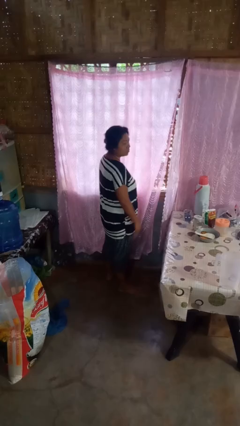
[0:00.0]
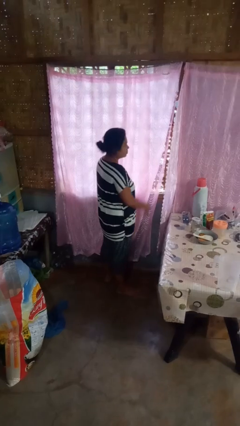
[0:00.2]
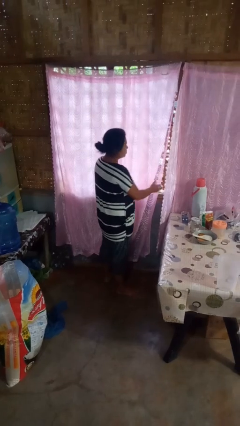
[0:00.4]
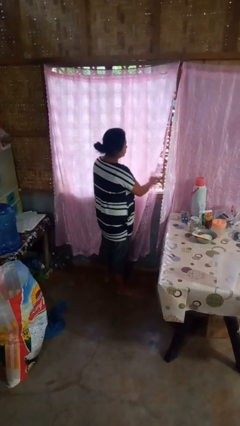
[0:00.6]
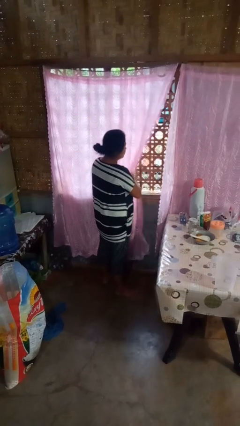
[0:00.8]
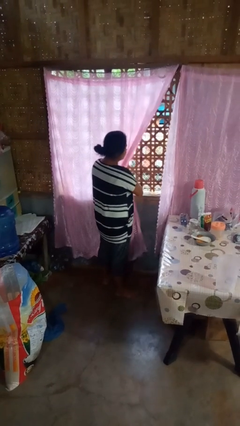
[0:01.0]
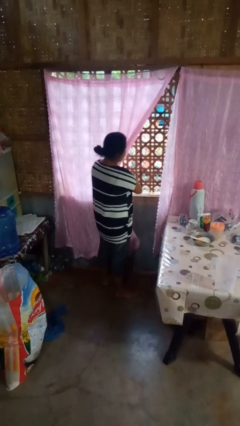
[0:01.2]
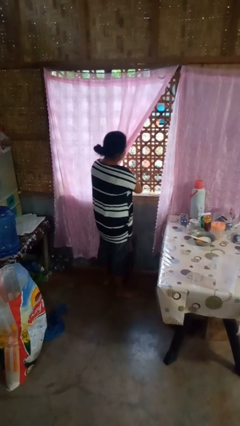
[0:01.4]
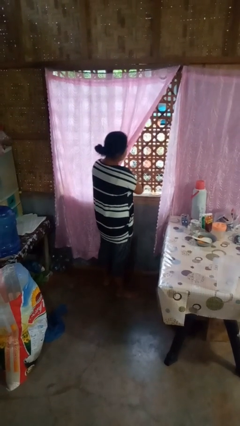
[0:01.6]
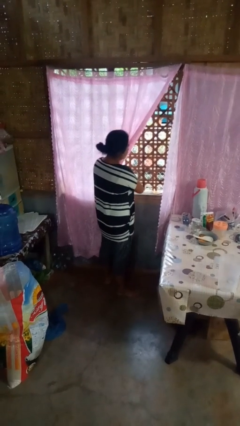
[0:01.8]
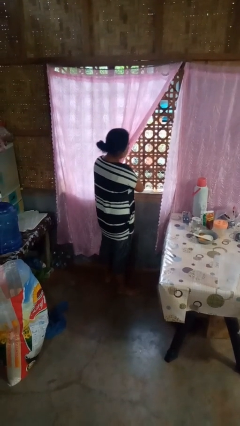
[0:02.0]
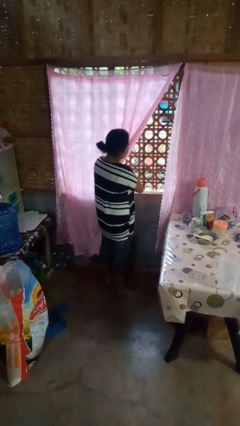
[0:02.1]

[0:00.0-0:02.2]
person opens curtains

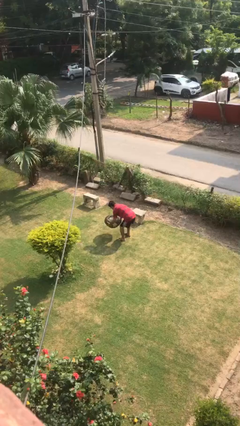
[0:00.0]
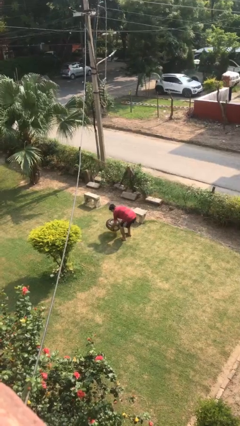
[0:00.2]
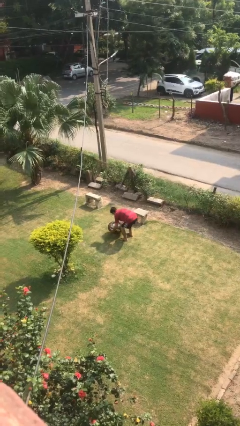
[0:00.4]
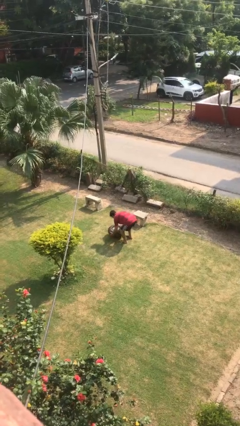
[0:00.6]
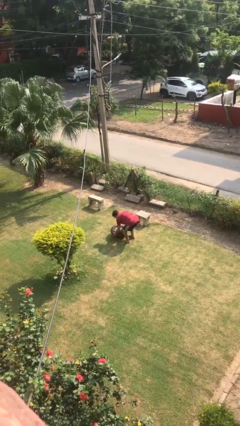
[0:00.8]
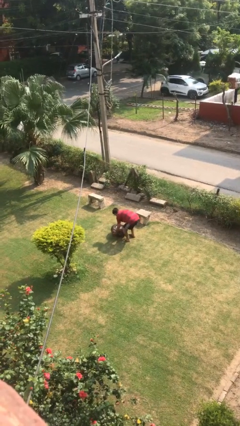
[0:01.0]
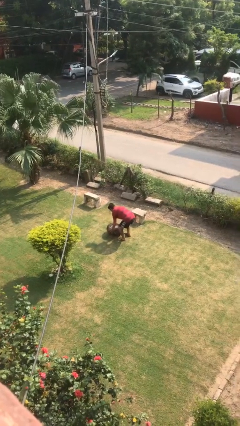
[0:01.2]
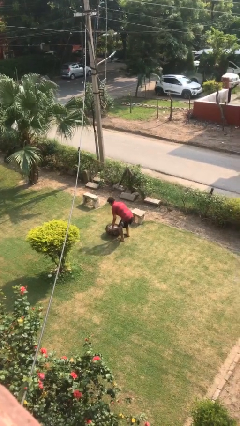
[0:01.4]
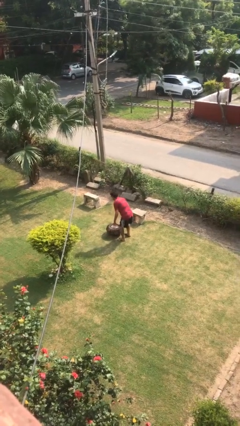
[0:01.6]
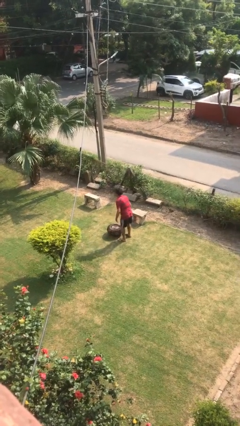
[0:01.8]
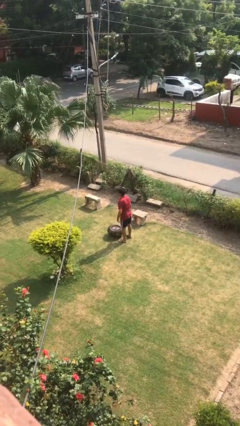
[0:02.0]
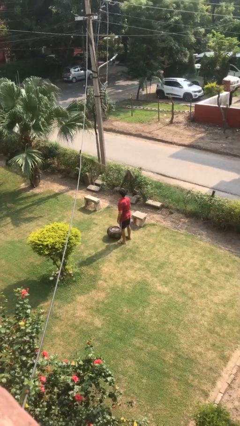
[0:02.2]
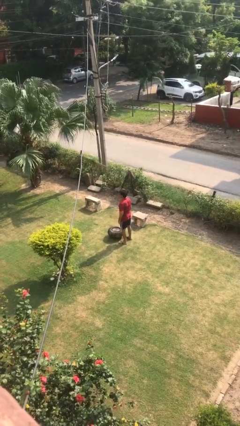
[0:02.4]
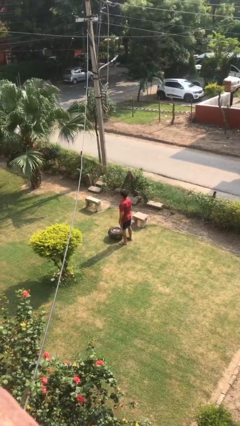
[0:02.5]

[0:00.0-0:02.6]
person puts down object on floor

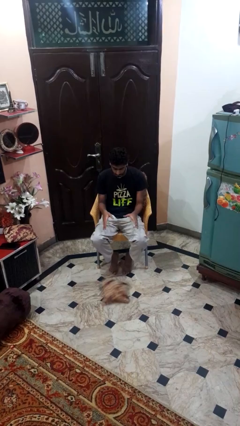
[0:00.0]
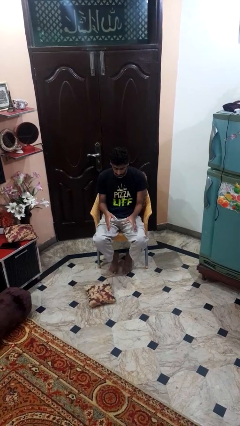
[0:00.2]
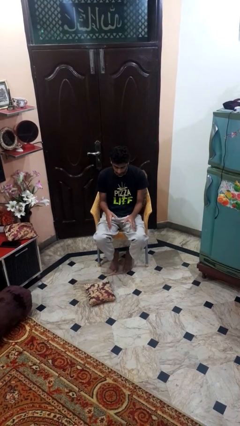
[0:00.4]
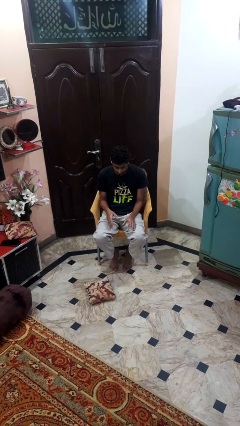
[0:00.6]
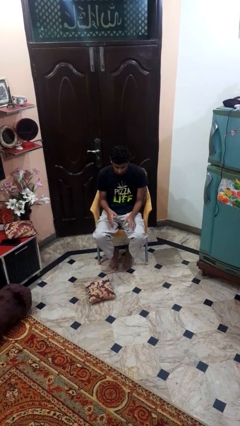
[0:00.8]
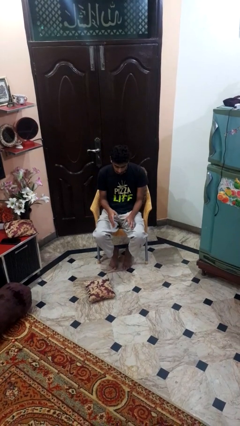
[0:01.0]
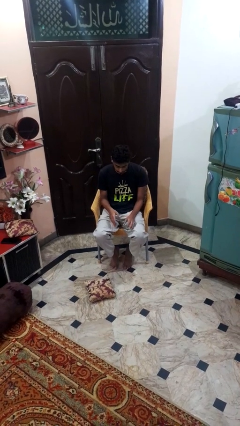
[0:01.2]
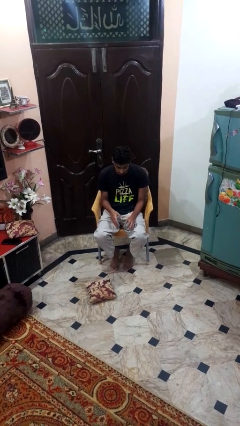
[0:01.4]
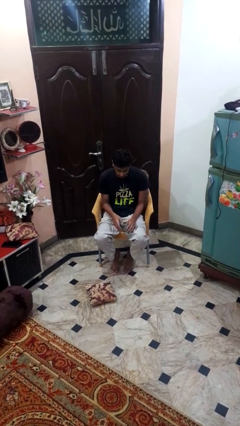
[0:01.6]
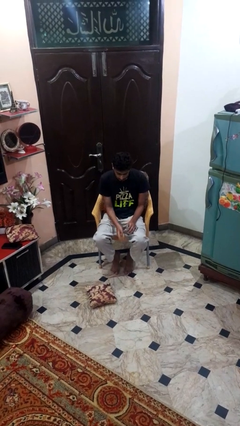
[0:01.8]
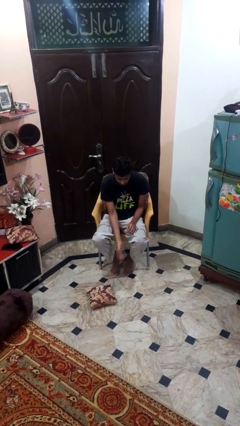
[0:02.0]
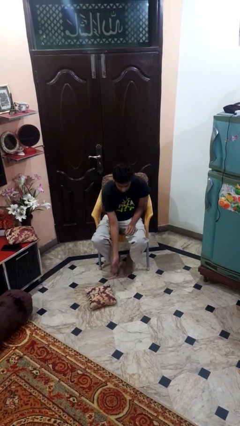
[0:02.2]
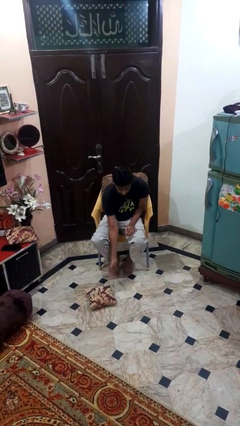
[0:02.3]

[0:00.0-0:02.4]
person drops object

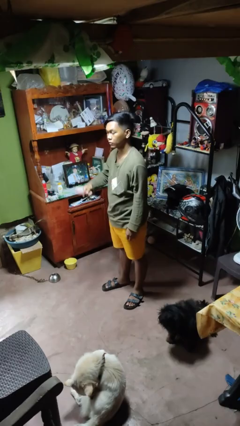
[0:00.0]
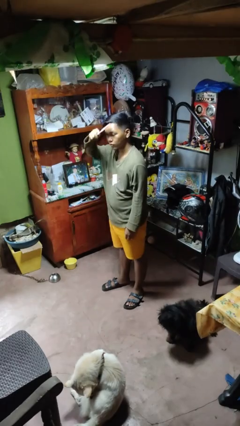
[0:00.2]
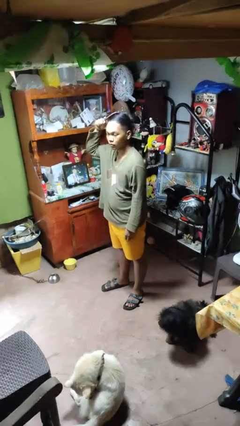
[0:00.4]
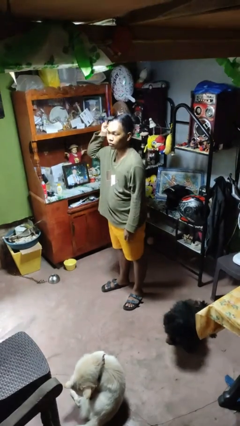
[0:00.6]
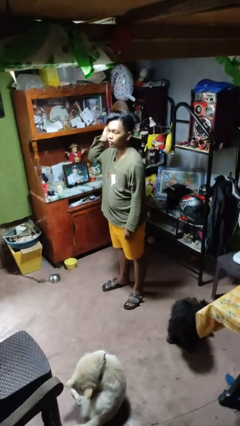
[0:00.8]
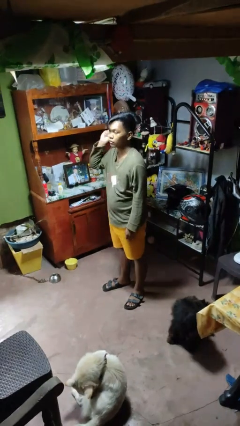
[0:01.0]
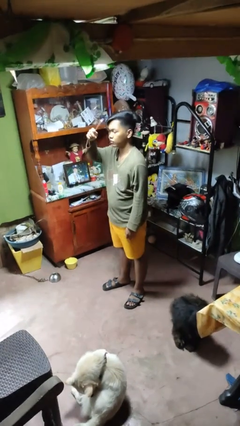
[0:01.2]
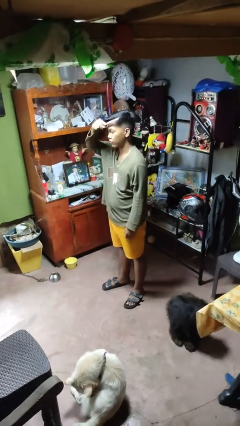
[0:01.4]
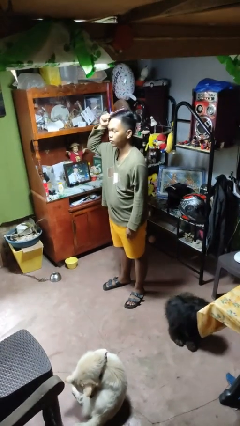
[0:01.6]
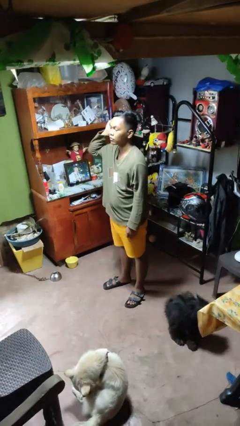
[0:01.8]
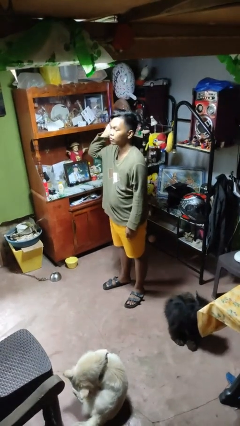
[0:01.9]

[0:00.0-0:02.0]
person brushes hair

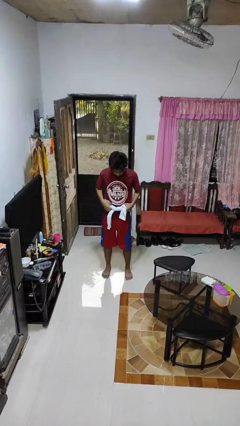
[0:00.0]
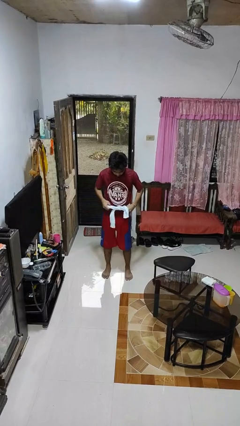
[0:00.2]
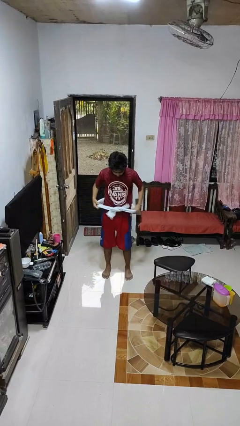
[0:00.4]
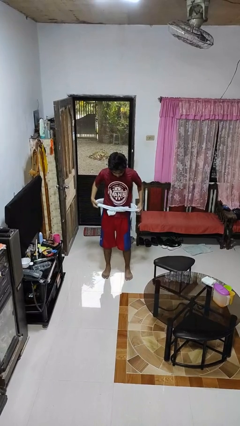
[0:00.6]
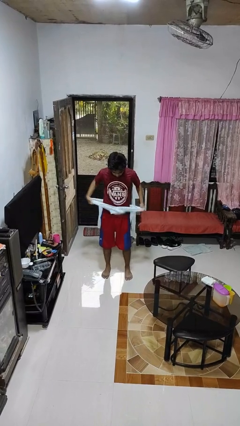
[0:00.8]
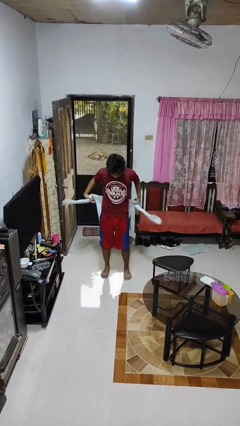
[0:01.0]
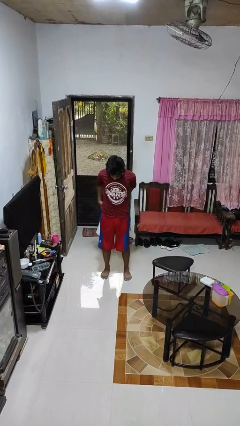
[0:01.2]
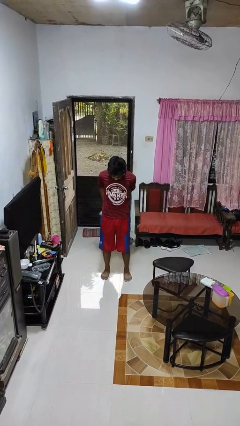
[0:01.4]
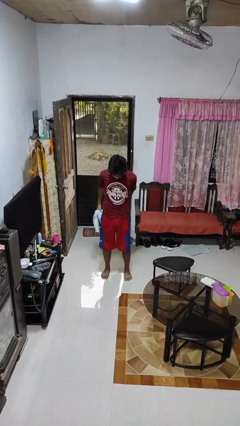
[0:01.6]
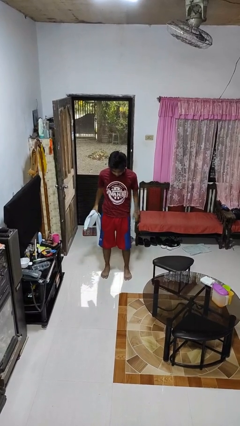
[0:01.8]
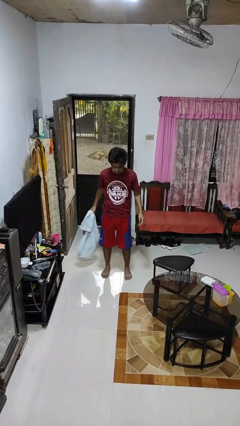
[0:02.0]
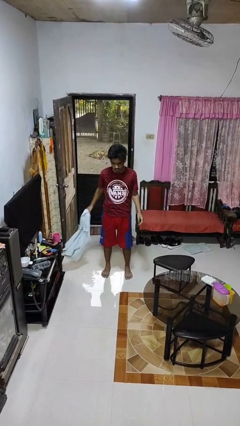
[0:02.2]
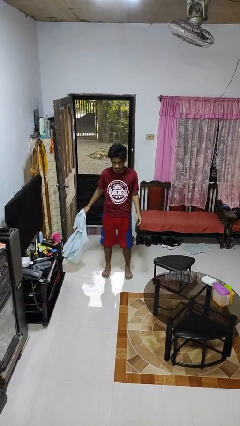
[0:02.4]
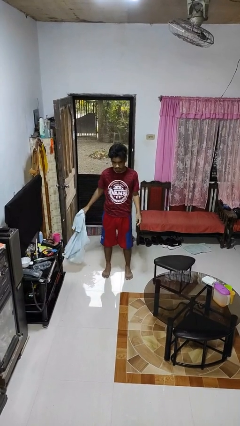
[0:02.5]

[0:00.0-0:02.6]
person unties jacket around waist

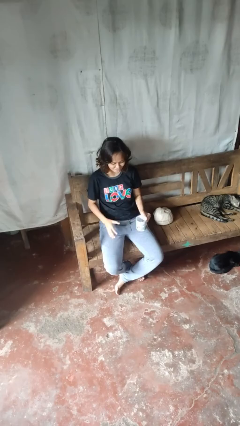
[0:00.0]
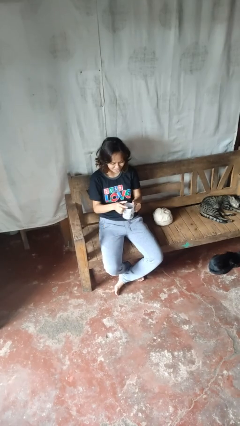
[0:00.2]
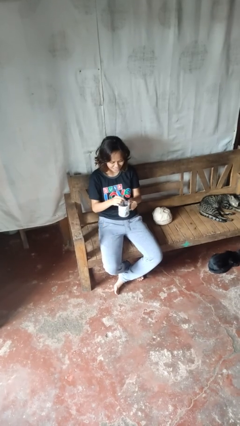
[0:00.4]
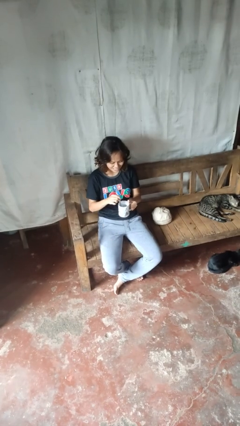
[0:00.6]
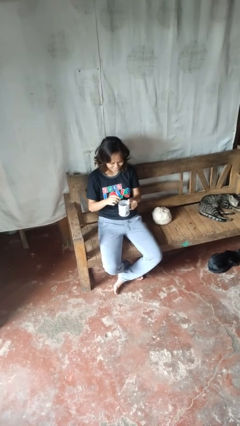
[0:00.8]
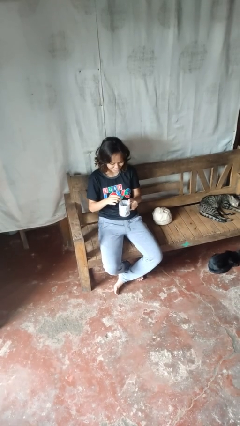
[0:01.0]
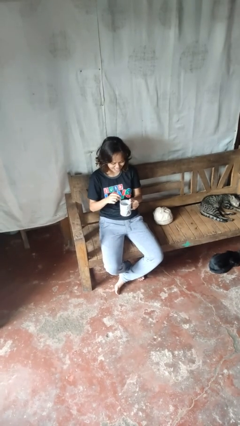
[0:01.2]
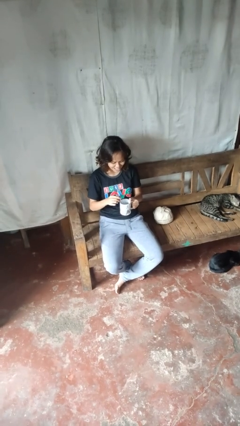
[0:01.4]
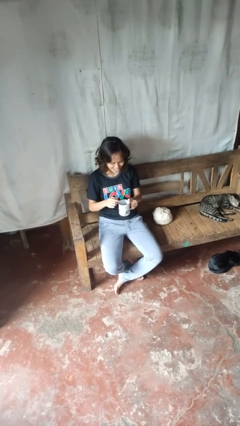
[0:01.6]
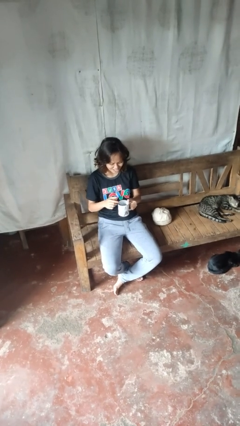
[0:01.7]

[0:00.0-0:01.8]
person stirs mug

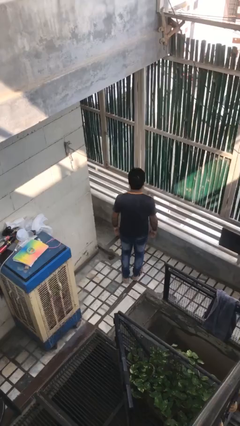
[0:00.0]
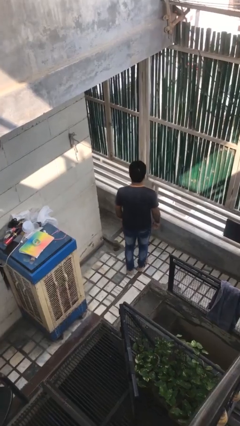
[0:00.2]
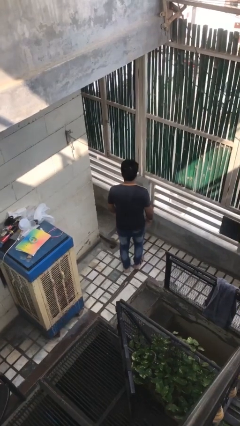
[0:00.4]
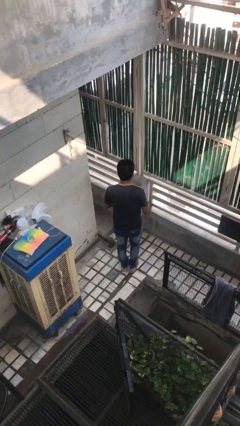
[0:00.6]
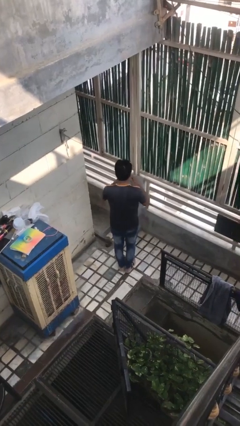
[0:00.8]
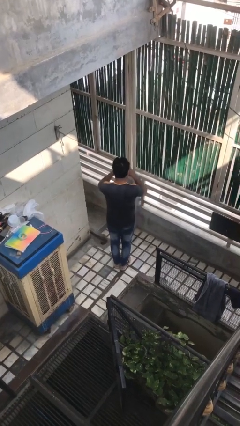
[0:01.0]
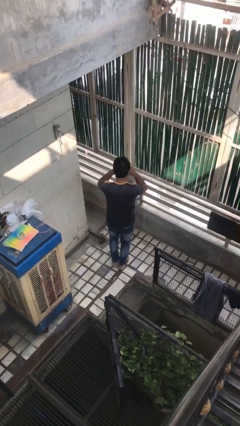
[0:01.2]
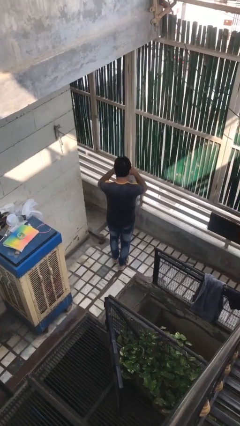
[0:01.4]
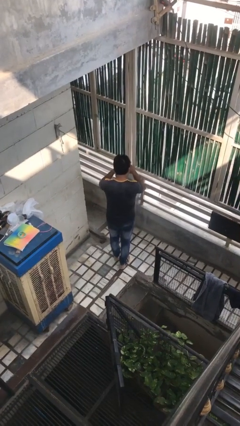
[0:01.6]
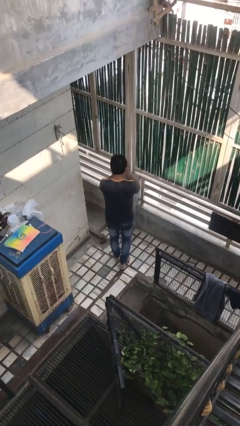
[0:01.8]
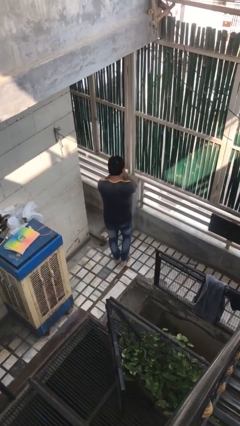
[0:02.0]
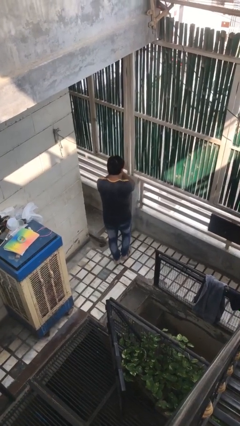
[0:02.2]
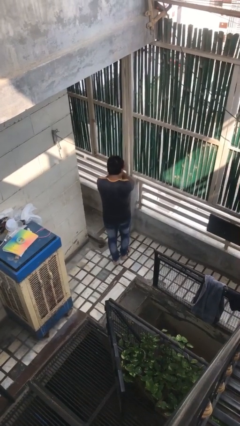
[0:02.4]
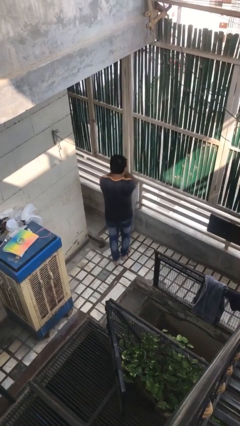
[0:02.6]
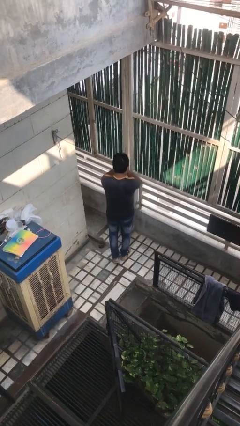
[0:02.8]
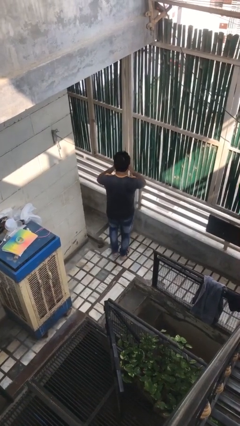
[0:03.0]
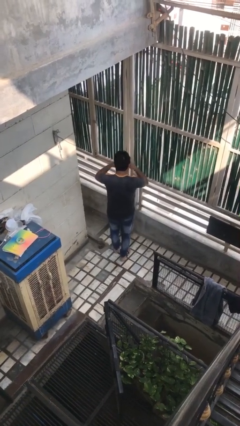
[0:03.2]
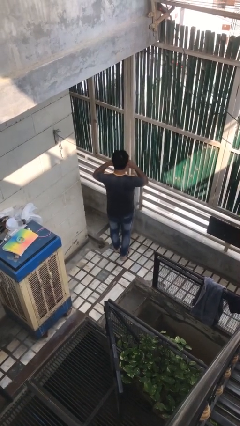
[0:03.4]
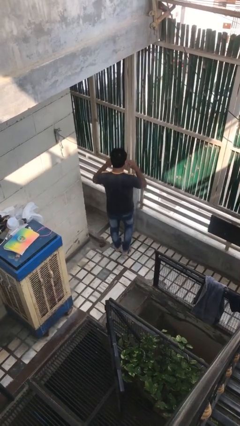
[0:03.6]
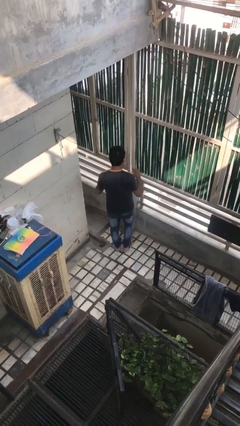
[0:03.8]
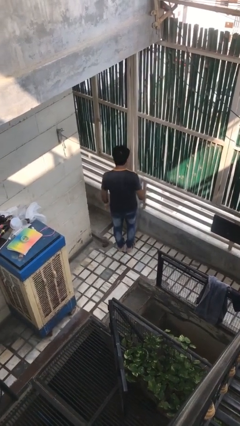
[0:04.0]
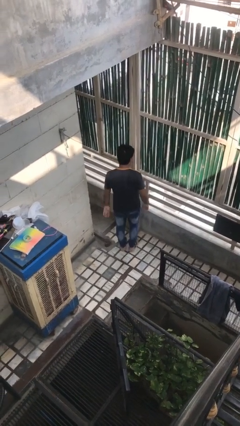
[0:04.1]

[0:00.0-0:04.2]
person rubs eyes
